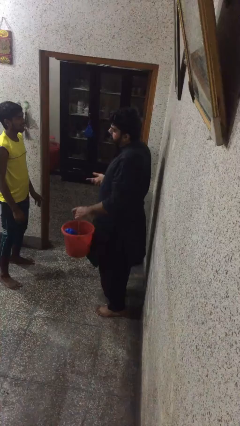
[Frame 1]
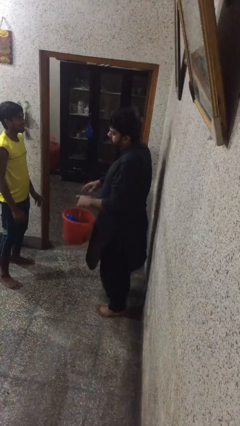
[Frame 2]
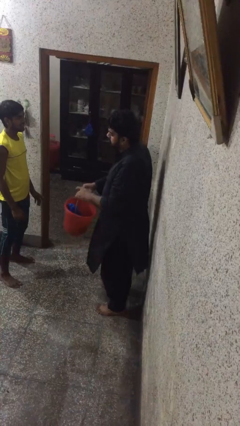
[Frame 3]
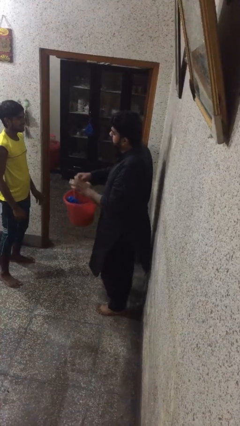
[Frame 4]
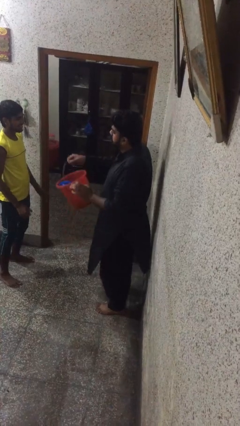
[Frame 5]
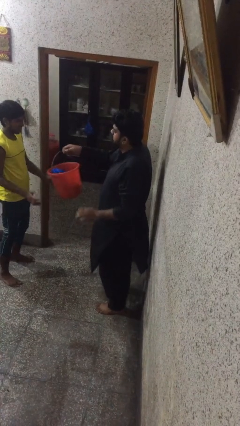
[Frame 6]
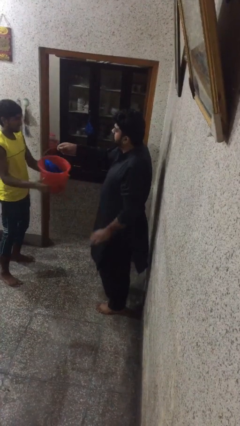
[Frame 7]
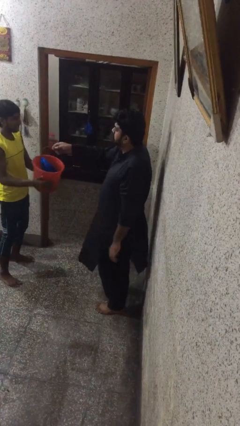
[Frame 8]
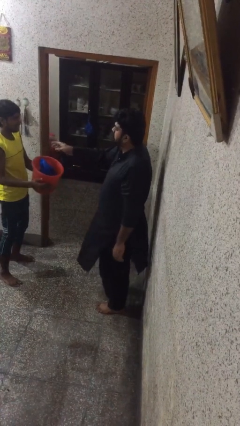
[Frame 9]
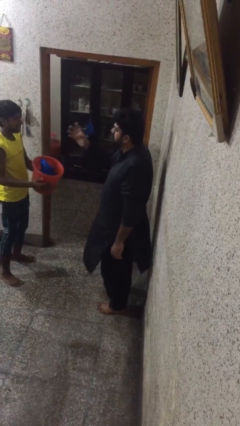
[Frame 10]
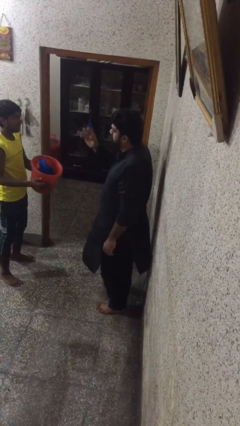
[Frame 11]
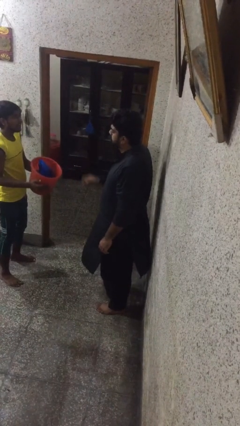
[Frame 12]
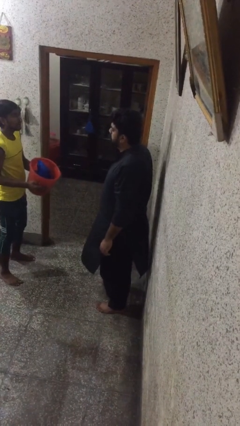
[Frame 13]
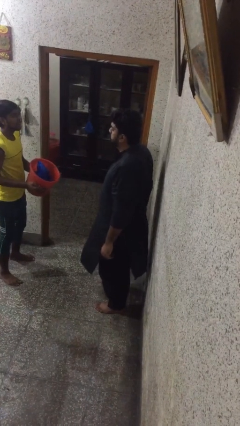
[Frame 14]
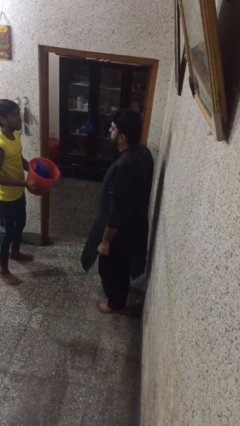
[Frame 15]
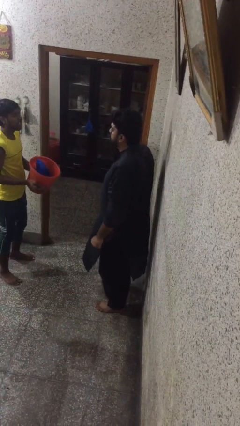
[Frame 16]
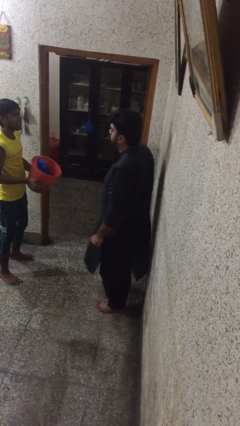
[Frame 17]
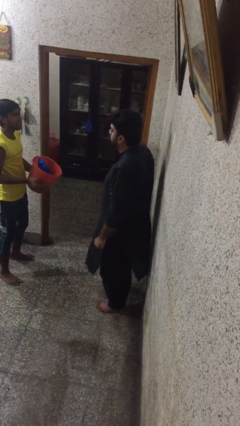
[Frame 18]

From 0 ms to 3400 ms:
person transfers object to person

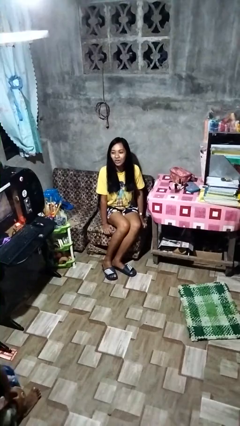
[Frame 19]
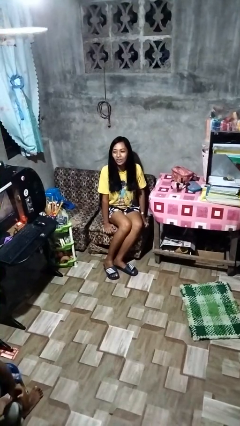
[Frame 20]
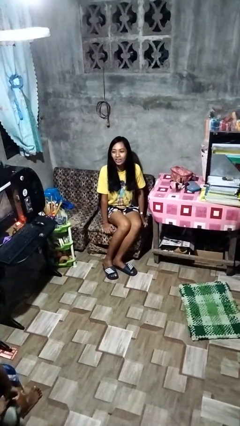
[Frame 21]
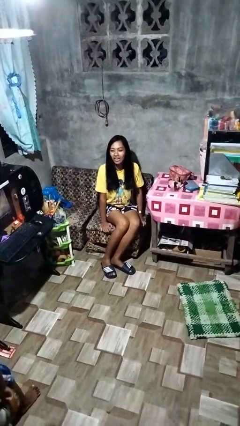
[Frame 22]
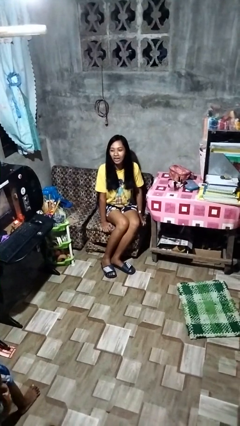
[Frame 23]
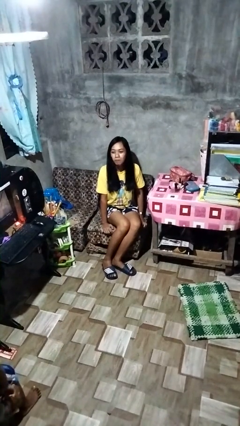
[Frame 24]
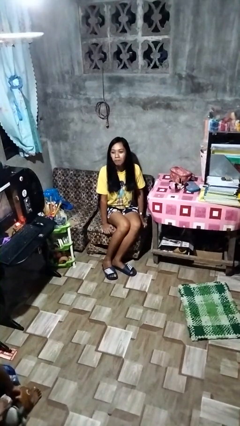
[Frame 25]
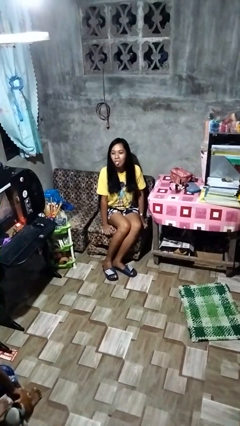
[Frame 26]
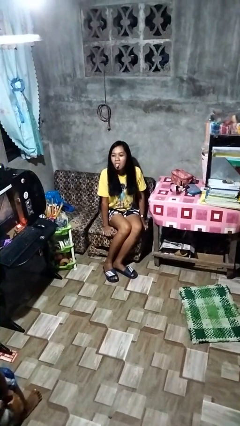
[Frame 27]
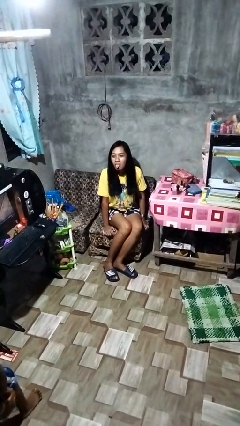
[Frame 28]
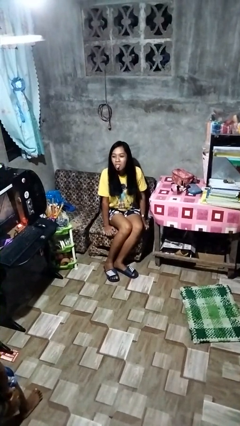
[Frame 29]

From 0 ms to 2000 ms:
person sticks out tongue

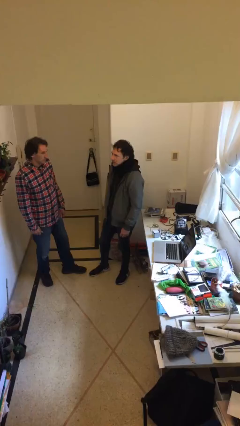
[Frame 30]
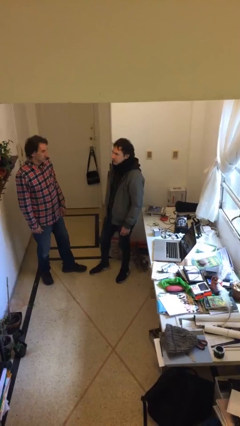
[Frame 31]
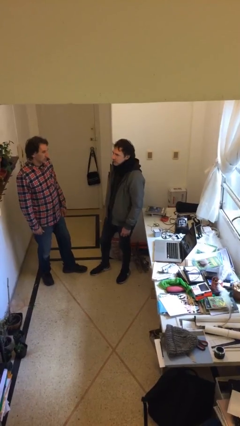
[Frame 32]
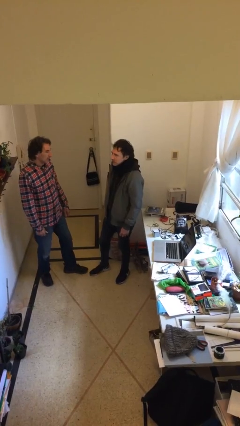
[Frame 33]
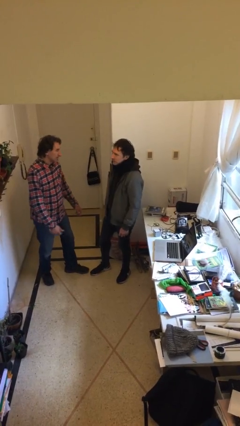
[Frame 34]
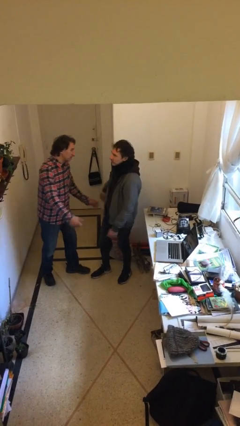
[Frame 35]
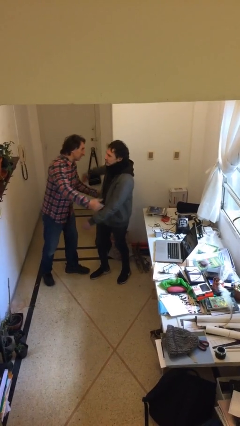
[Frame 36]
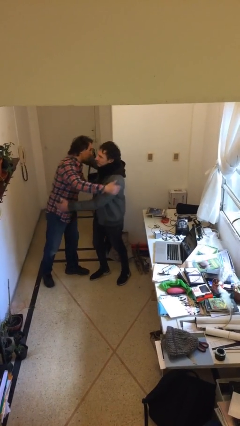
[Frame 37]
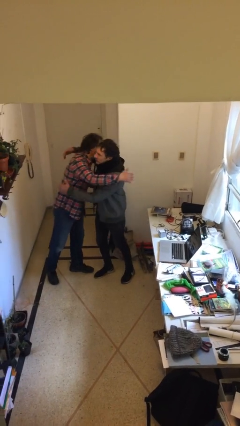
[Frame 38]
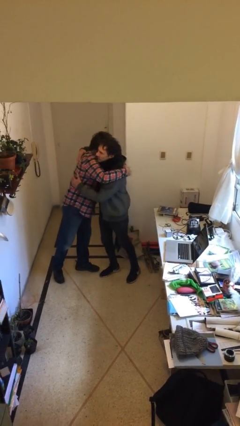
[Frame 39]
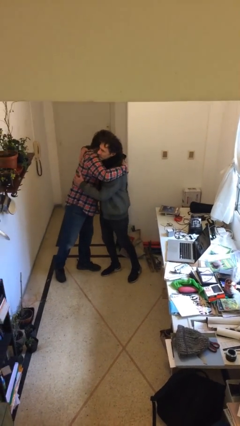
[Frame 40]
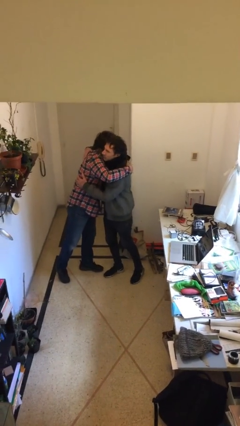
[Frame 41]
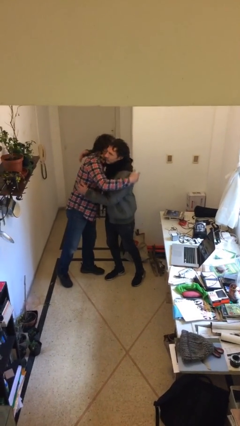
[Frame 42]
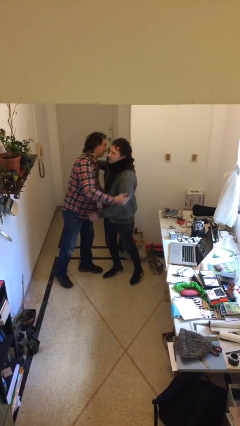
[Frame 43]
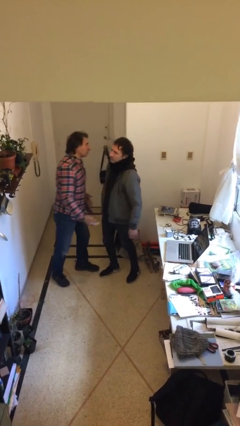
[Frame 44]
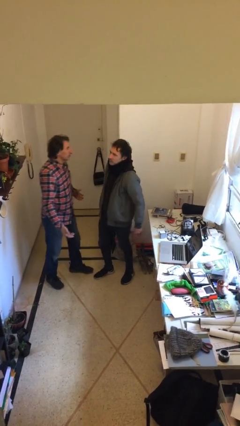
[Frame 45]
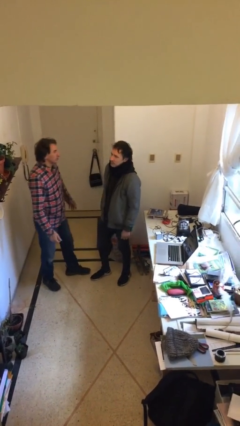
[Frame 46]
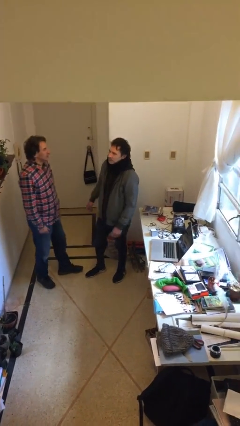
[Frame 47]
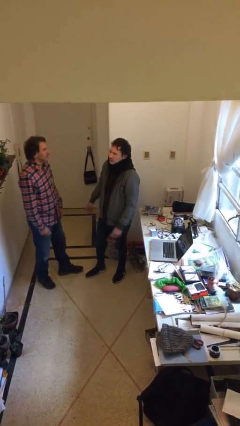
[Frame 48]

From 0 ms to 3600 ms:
person embraces person

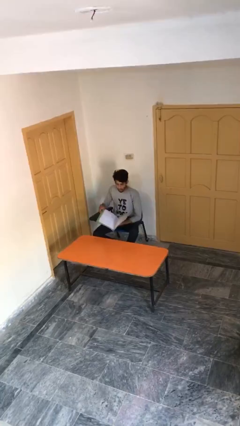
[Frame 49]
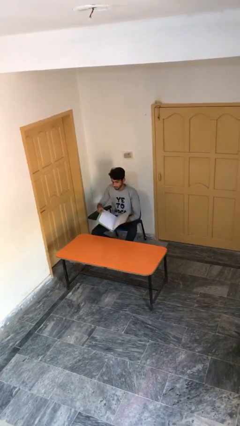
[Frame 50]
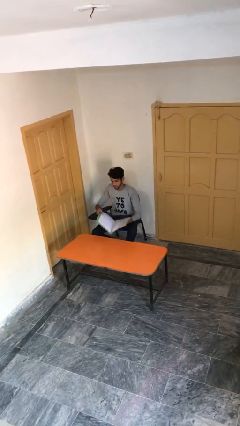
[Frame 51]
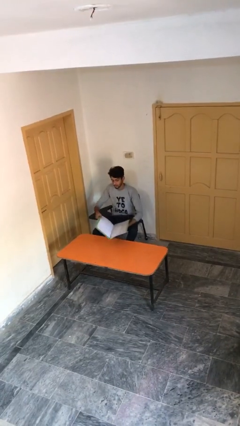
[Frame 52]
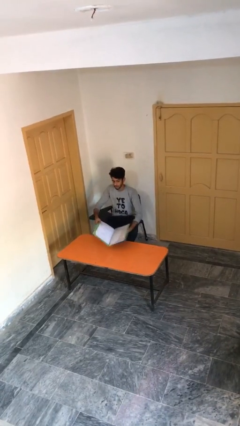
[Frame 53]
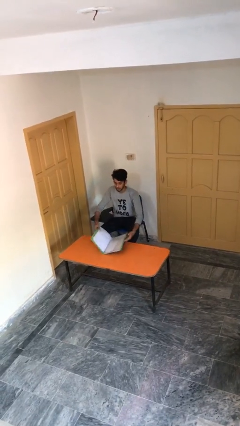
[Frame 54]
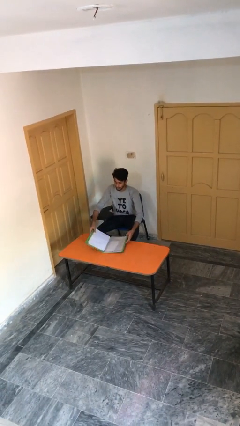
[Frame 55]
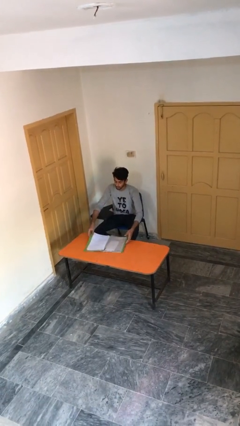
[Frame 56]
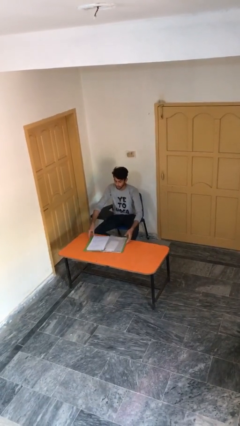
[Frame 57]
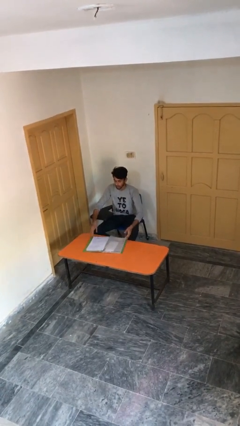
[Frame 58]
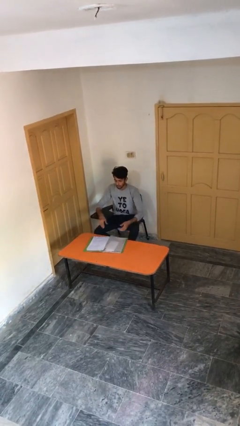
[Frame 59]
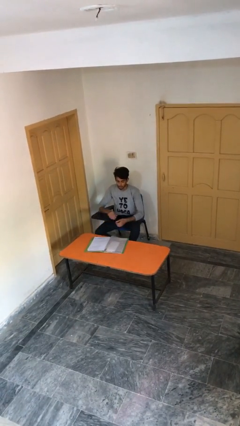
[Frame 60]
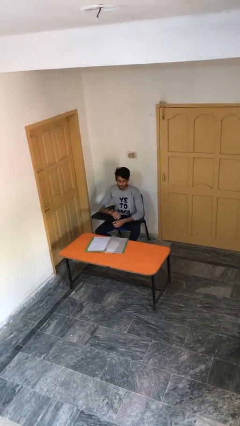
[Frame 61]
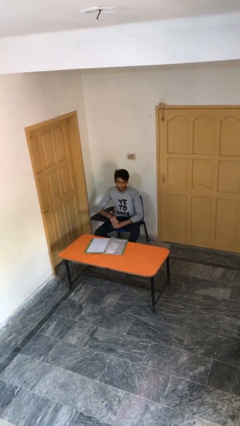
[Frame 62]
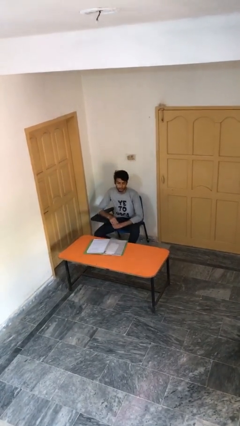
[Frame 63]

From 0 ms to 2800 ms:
person puts down object on table

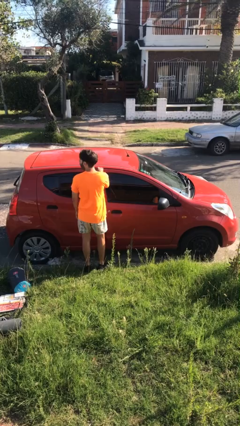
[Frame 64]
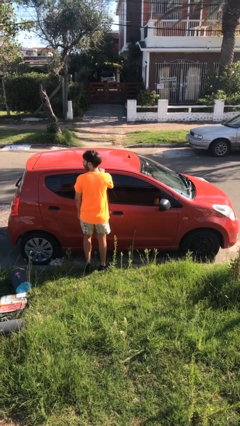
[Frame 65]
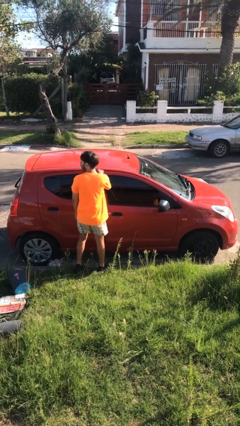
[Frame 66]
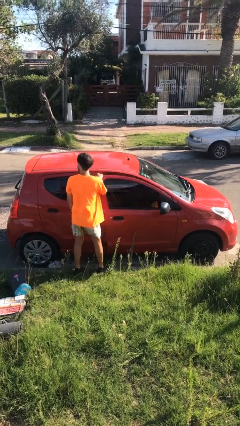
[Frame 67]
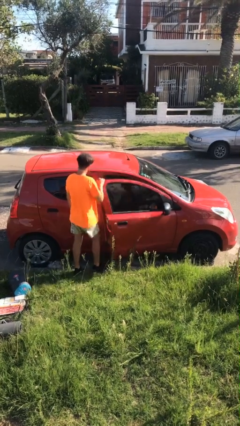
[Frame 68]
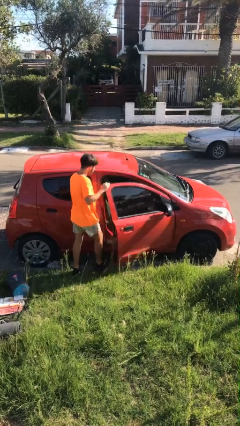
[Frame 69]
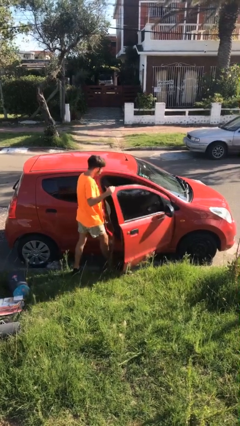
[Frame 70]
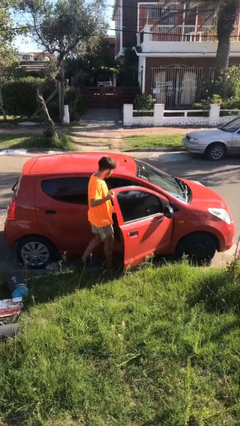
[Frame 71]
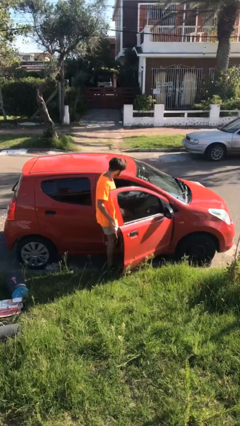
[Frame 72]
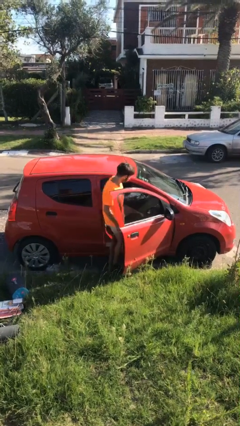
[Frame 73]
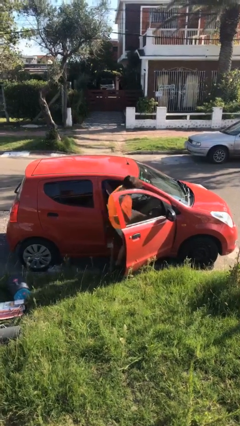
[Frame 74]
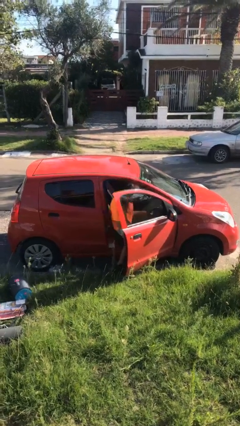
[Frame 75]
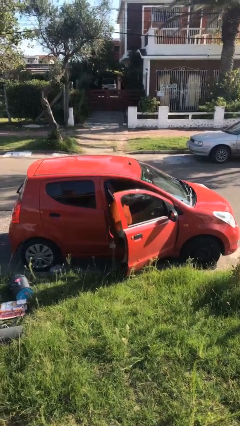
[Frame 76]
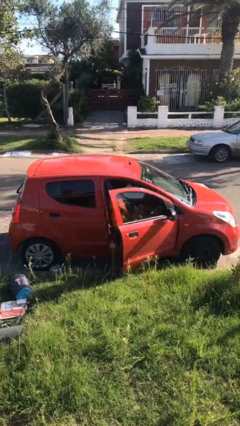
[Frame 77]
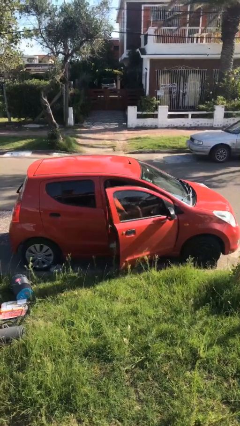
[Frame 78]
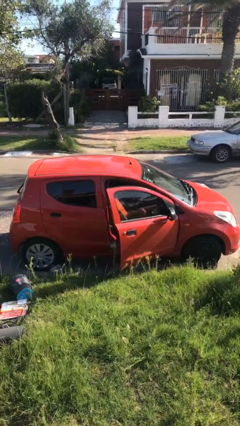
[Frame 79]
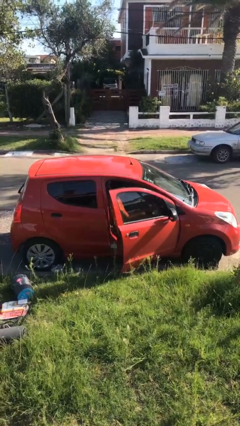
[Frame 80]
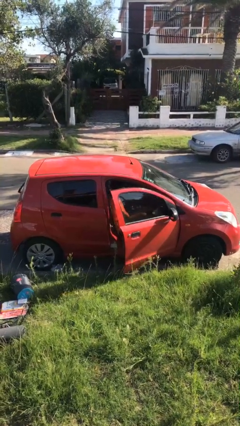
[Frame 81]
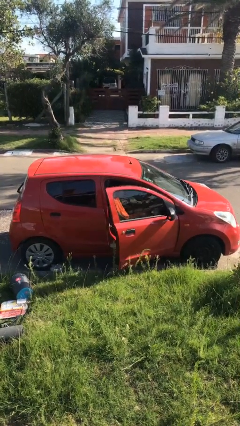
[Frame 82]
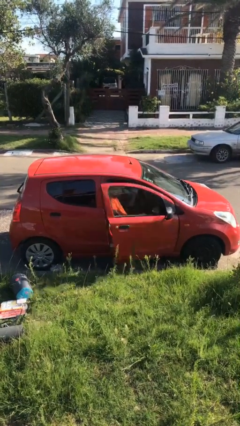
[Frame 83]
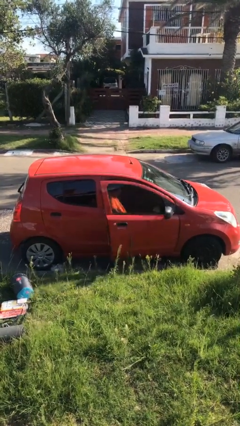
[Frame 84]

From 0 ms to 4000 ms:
car picks up person

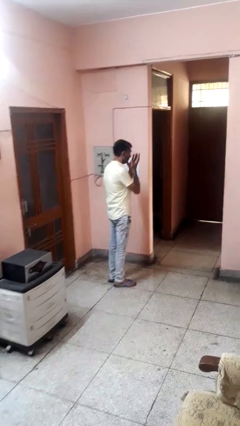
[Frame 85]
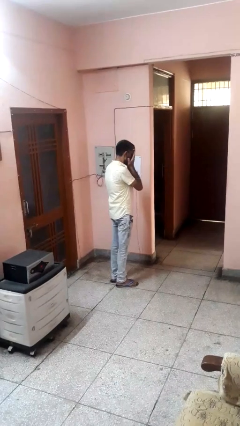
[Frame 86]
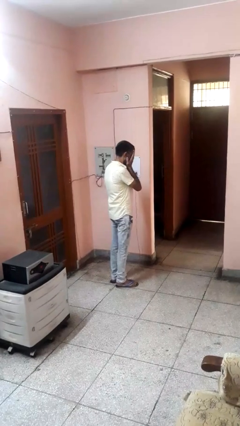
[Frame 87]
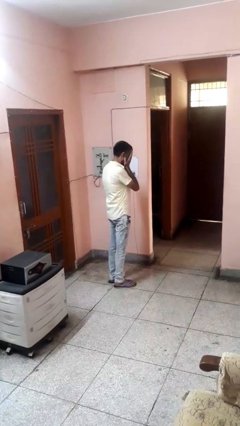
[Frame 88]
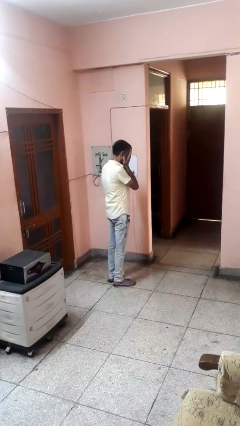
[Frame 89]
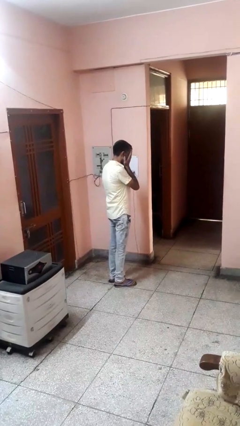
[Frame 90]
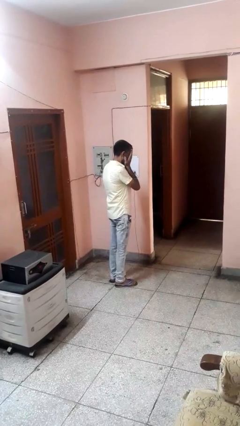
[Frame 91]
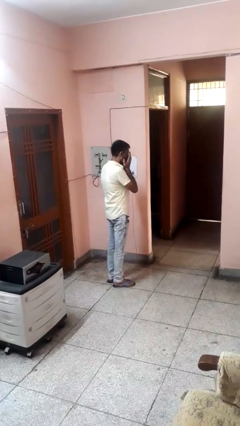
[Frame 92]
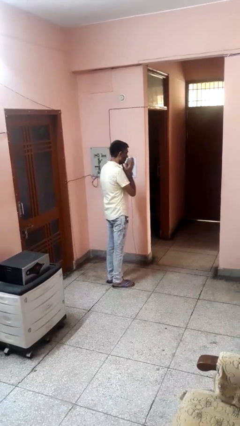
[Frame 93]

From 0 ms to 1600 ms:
person covers face with hands
